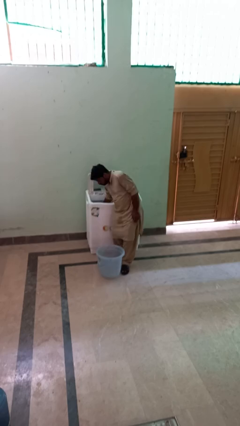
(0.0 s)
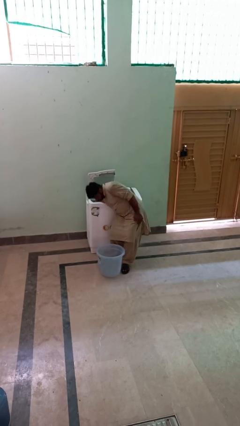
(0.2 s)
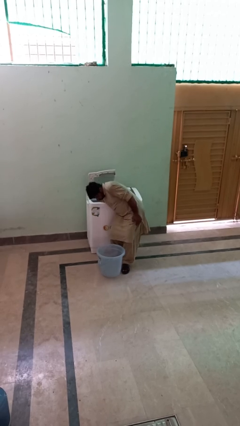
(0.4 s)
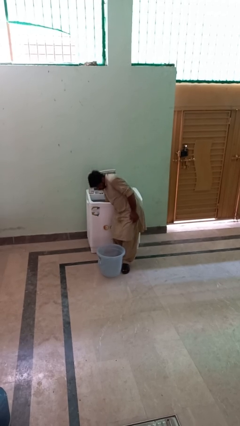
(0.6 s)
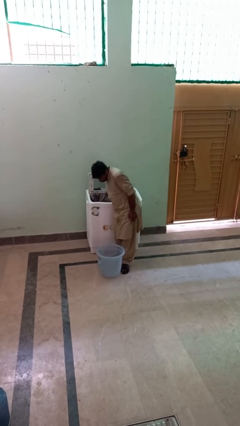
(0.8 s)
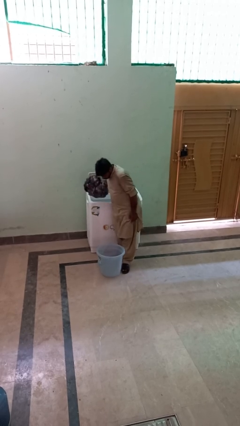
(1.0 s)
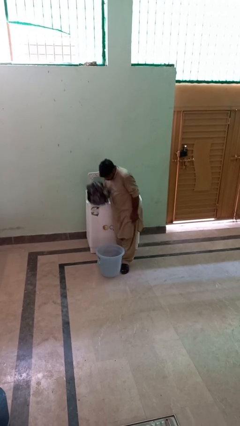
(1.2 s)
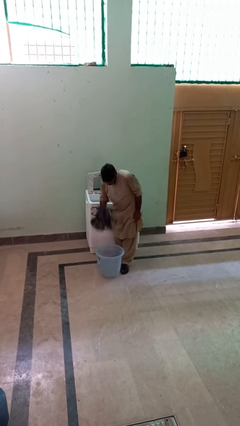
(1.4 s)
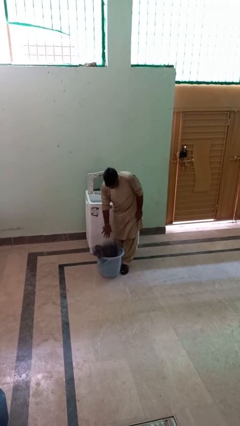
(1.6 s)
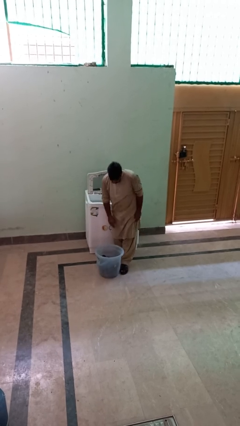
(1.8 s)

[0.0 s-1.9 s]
person unloads clotheswasher

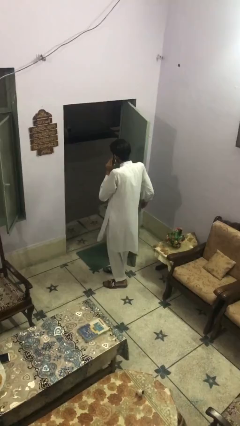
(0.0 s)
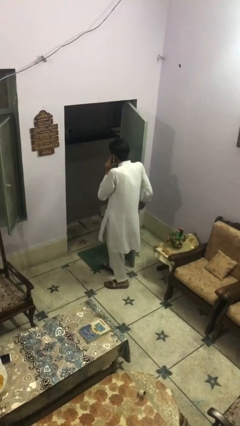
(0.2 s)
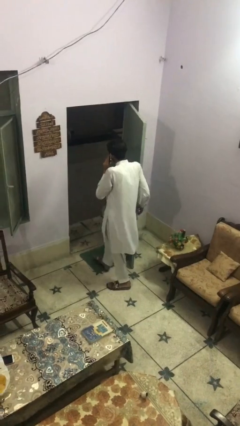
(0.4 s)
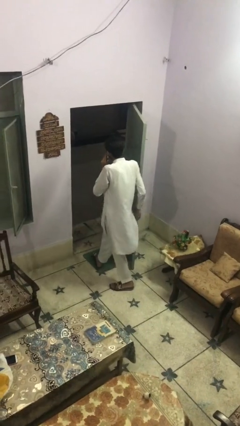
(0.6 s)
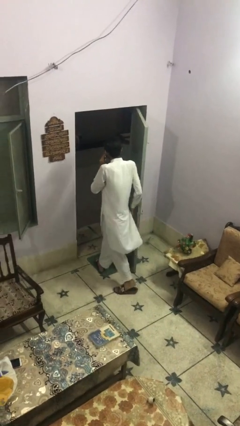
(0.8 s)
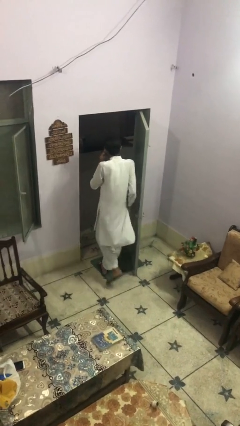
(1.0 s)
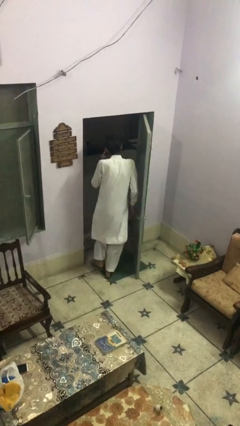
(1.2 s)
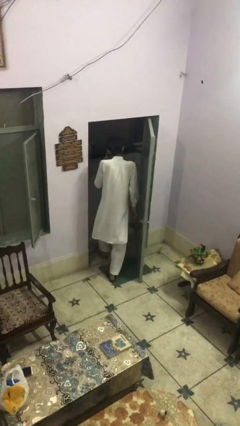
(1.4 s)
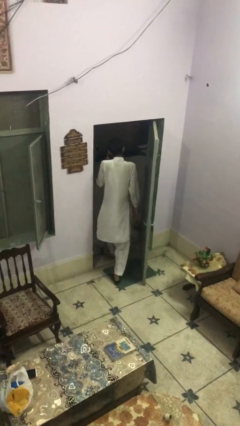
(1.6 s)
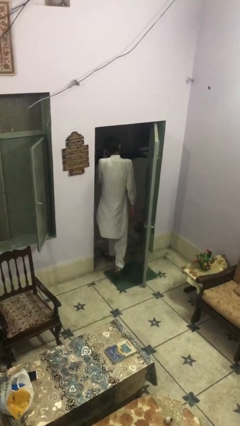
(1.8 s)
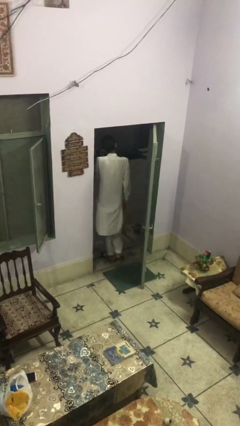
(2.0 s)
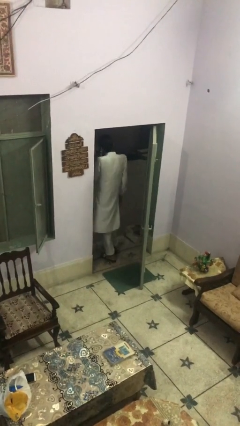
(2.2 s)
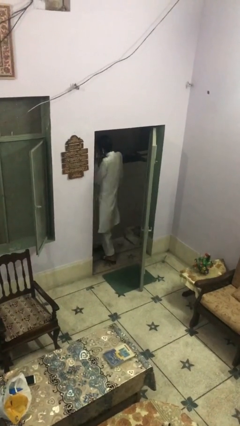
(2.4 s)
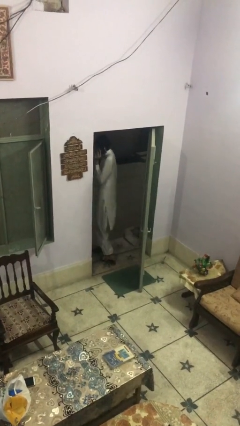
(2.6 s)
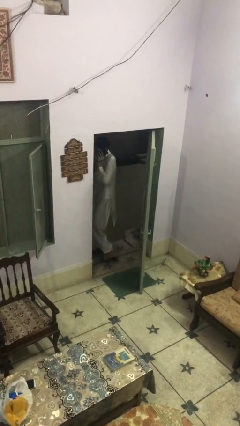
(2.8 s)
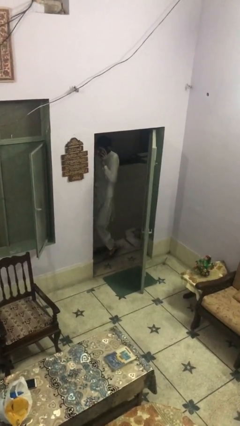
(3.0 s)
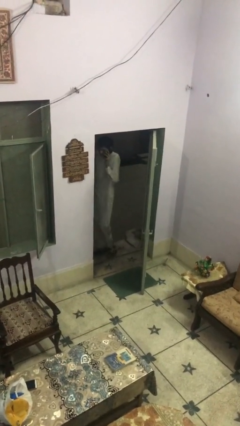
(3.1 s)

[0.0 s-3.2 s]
person exits scene through structure

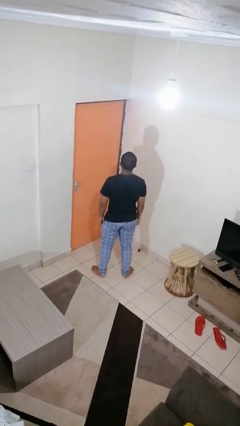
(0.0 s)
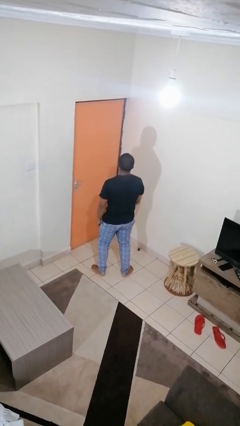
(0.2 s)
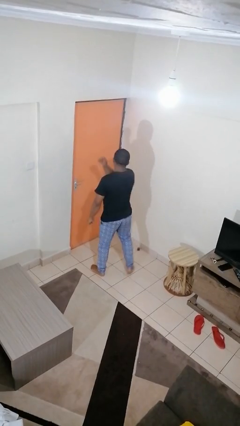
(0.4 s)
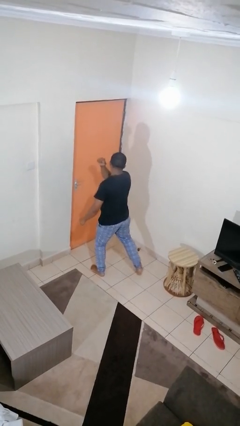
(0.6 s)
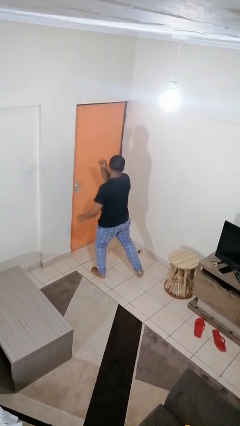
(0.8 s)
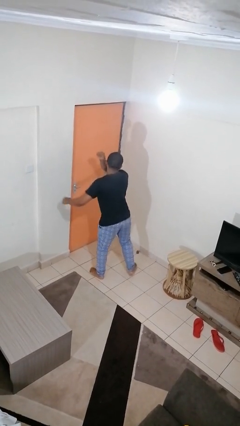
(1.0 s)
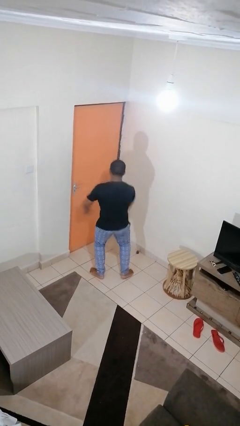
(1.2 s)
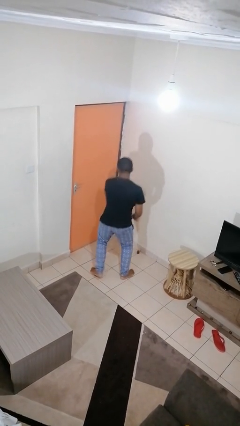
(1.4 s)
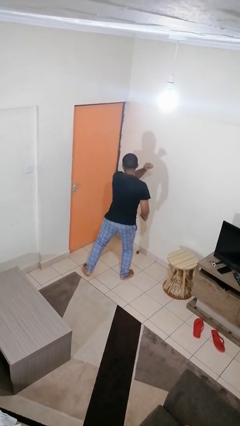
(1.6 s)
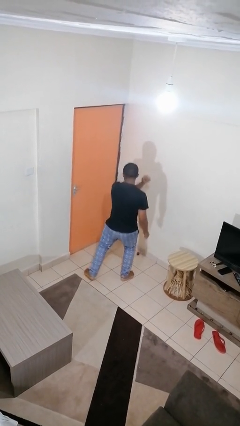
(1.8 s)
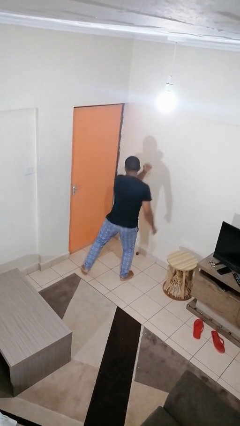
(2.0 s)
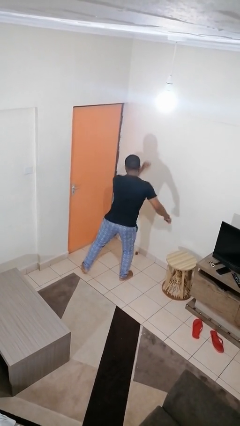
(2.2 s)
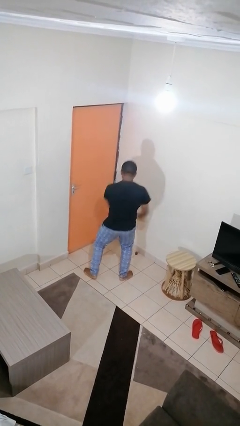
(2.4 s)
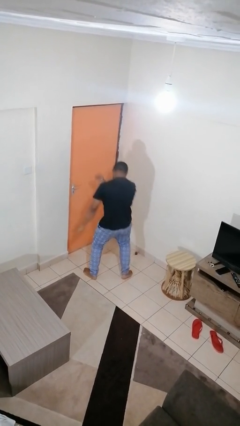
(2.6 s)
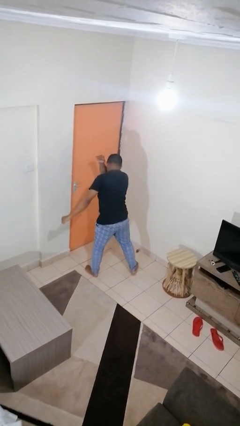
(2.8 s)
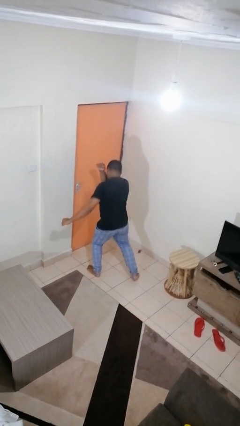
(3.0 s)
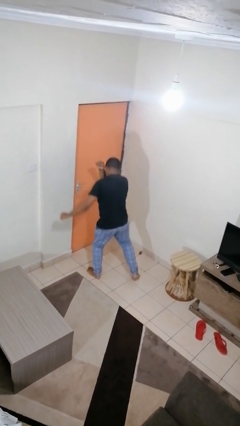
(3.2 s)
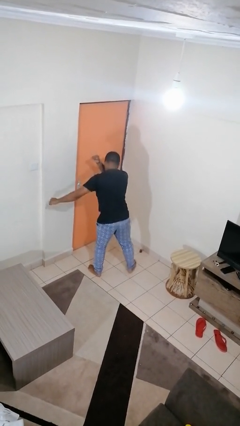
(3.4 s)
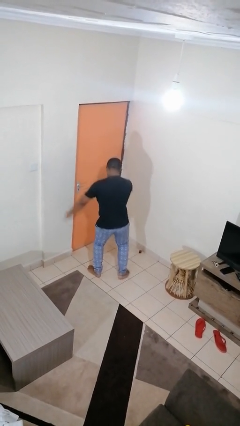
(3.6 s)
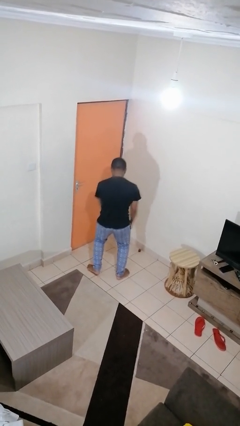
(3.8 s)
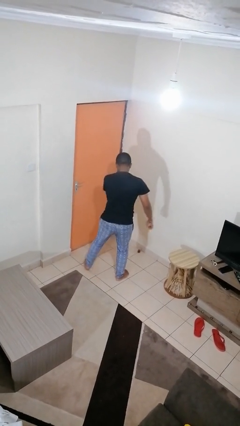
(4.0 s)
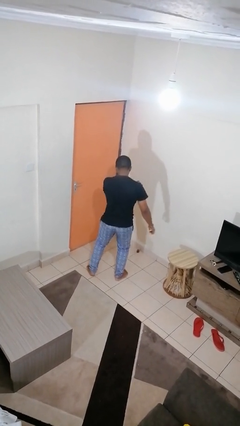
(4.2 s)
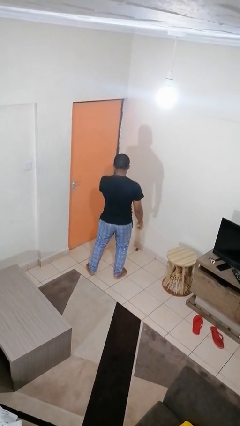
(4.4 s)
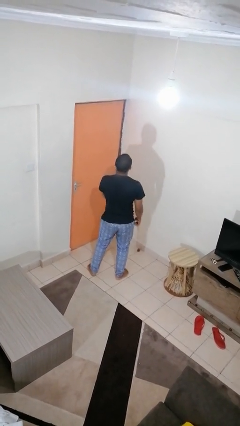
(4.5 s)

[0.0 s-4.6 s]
person dances in place

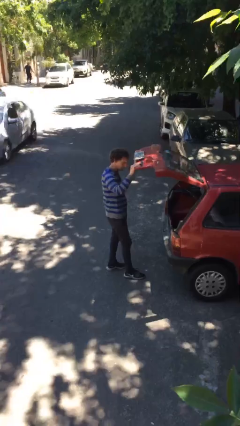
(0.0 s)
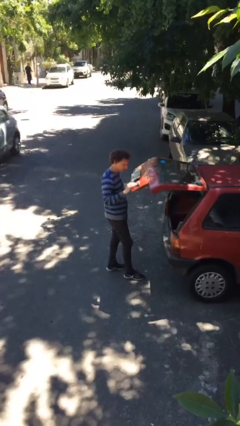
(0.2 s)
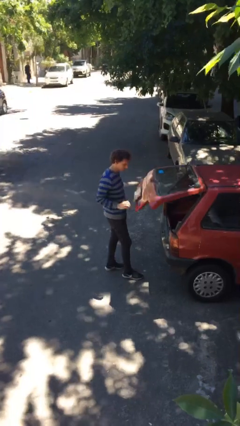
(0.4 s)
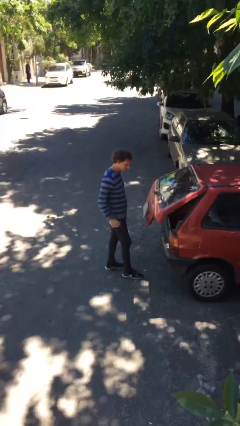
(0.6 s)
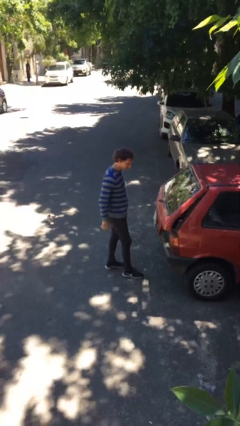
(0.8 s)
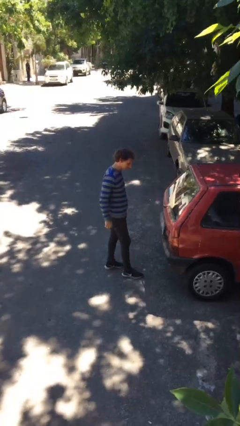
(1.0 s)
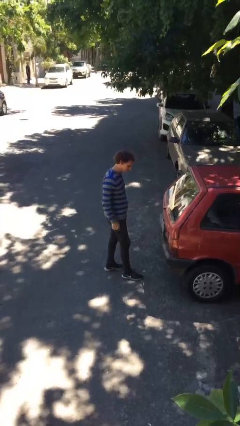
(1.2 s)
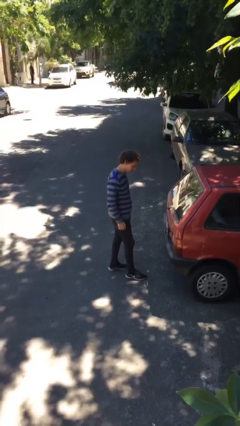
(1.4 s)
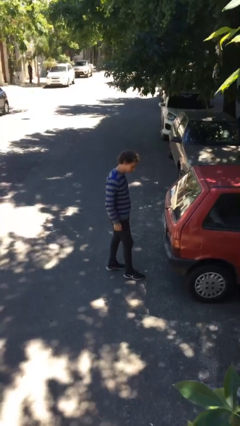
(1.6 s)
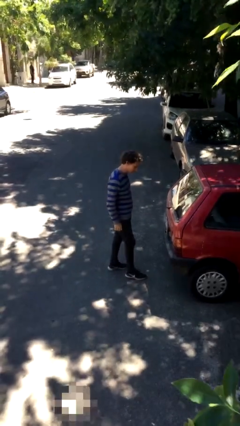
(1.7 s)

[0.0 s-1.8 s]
person closes car trunk

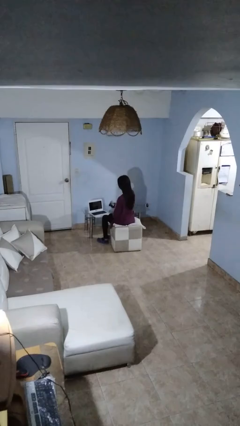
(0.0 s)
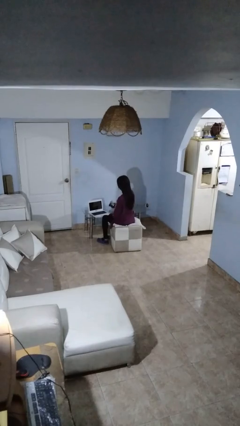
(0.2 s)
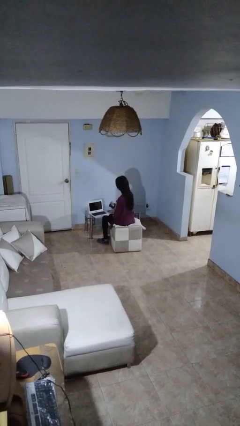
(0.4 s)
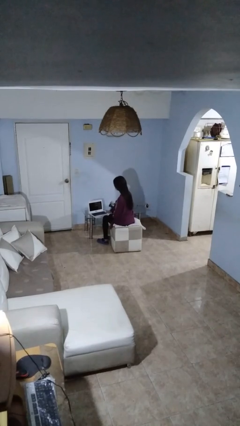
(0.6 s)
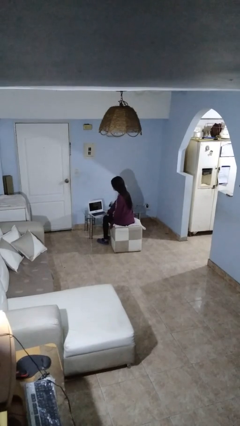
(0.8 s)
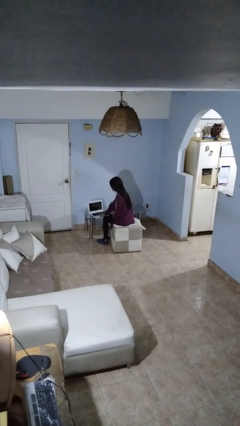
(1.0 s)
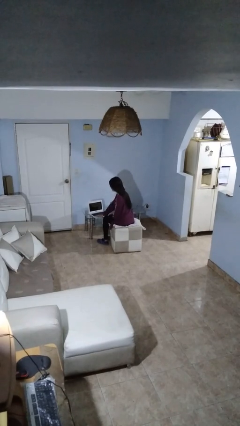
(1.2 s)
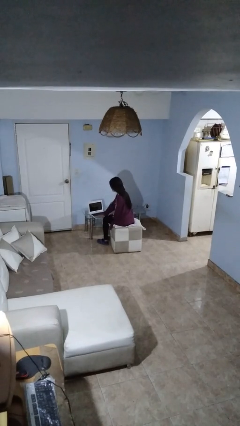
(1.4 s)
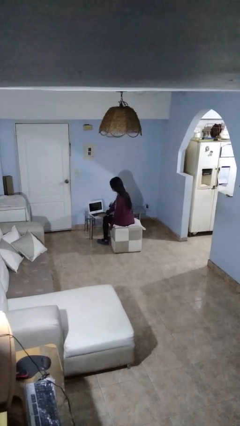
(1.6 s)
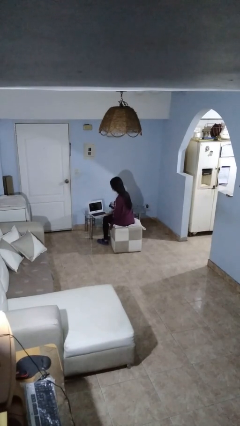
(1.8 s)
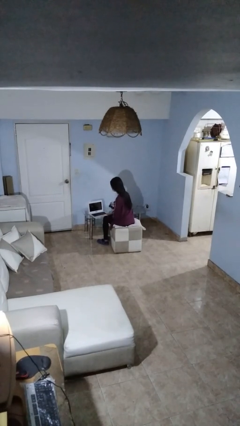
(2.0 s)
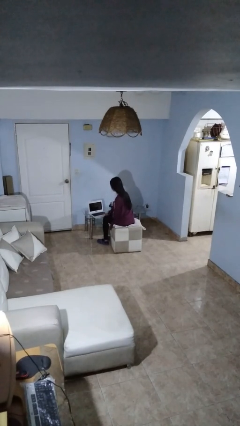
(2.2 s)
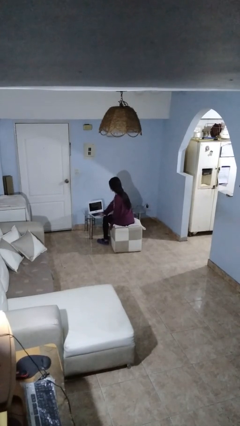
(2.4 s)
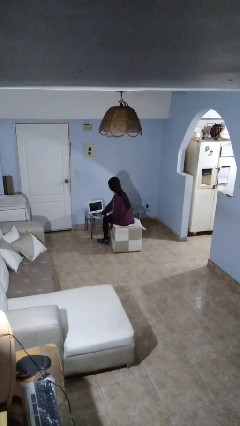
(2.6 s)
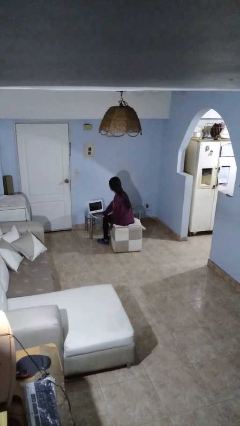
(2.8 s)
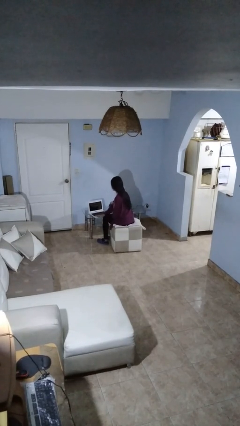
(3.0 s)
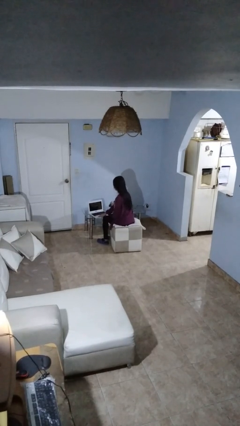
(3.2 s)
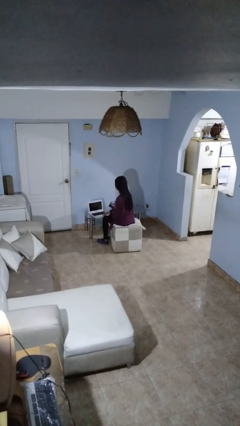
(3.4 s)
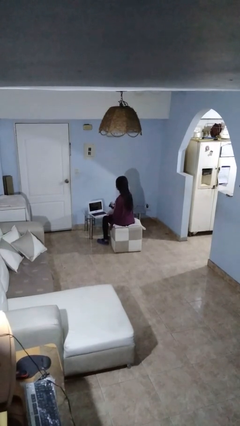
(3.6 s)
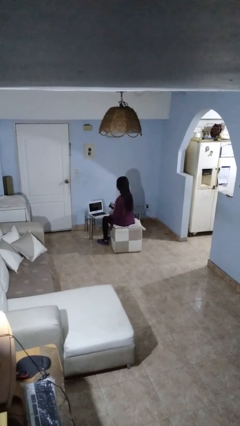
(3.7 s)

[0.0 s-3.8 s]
person waves hand over object

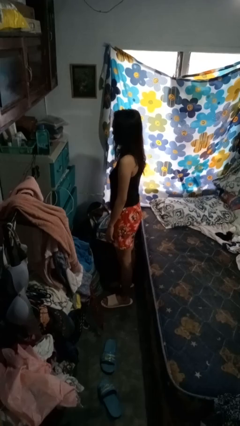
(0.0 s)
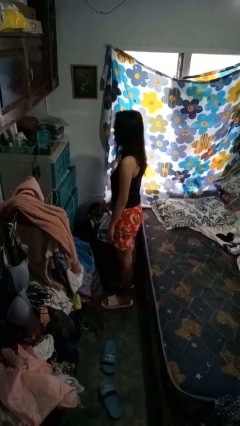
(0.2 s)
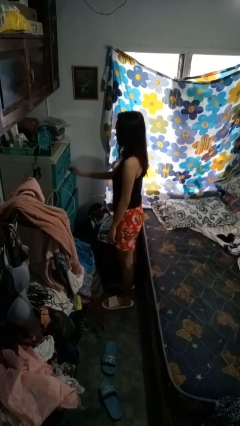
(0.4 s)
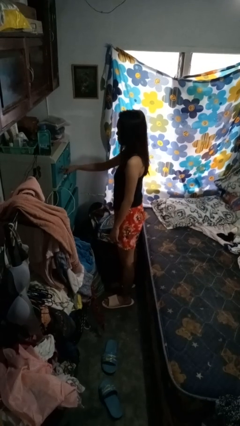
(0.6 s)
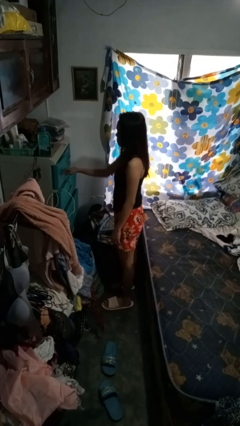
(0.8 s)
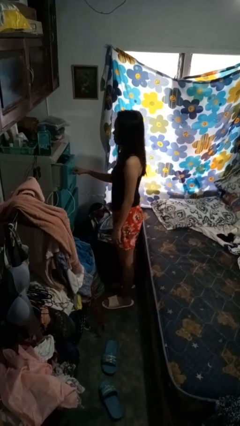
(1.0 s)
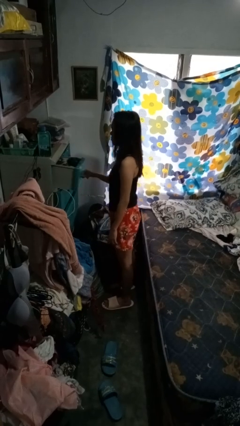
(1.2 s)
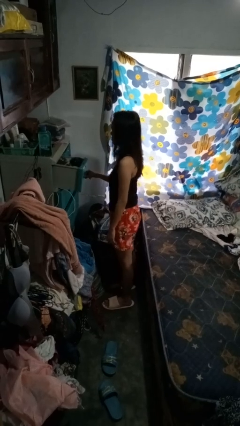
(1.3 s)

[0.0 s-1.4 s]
person opens dresser drawer

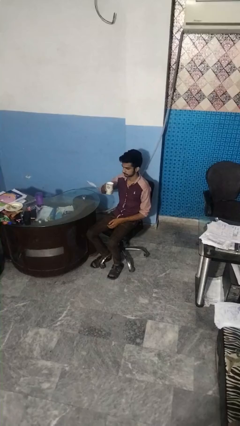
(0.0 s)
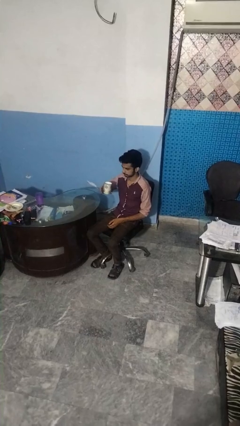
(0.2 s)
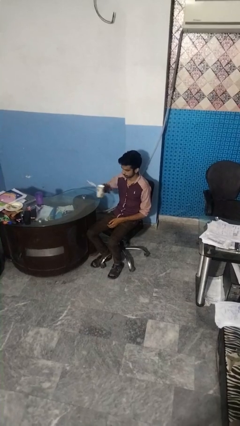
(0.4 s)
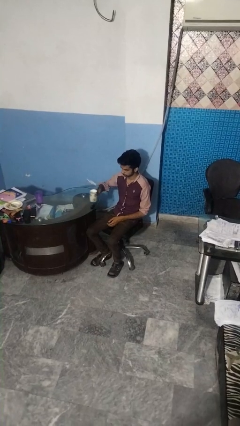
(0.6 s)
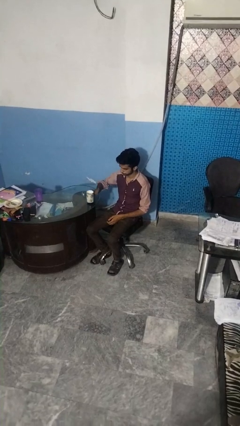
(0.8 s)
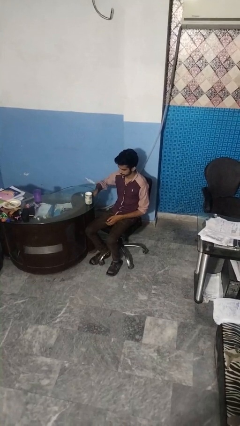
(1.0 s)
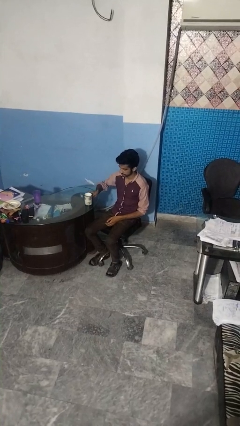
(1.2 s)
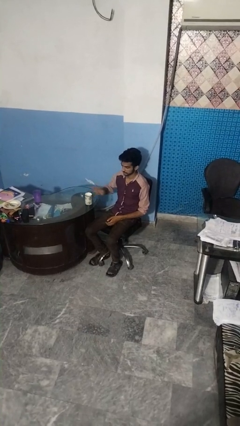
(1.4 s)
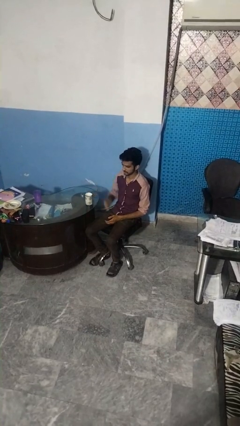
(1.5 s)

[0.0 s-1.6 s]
person puts down object on table
